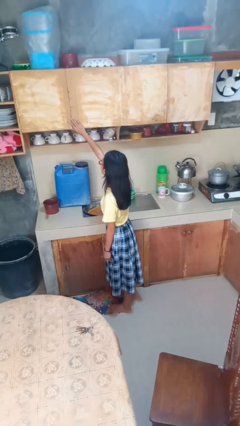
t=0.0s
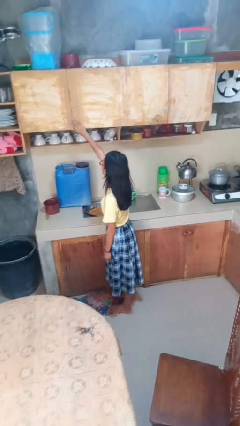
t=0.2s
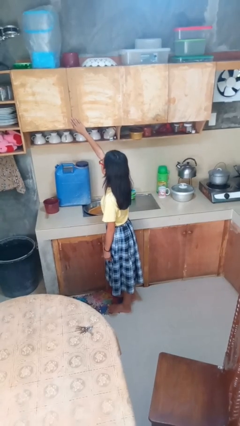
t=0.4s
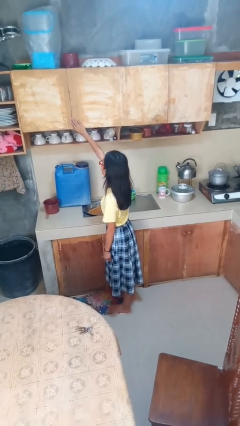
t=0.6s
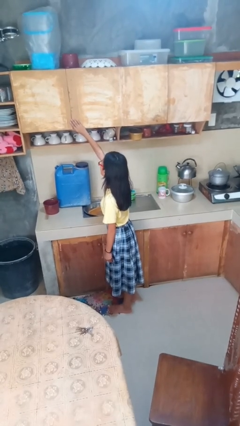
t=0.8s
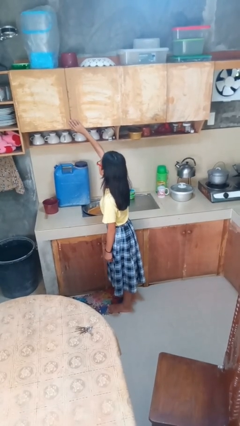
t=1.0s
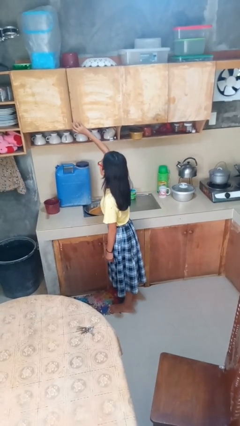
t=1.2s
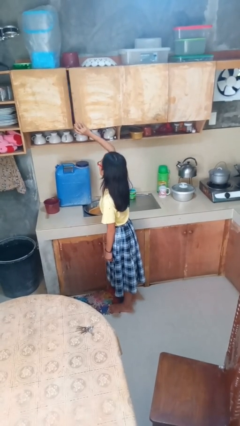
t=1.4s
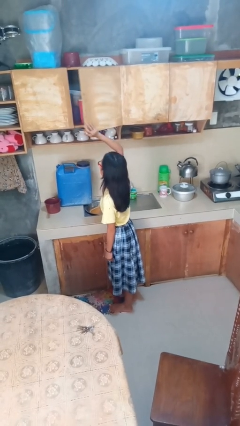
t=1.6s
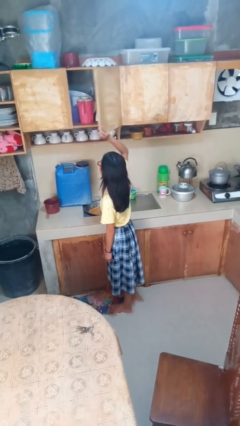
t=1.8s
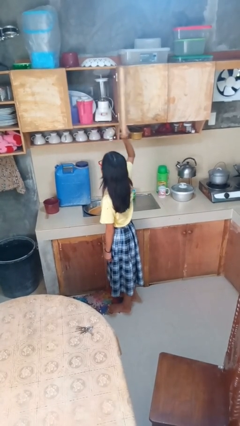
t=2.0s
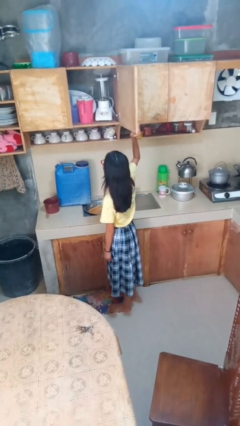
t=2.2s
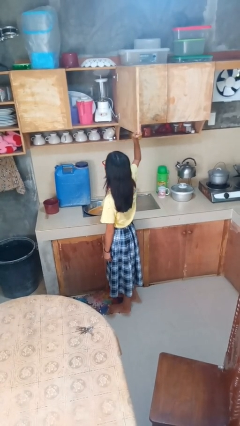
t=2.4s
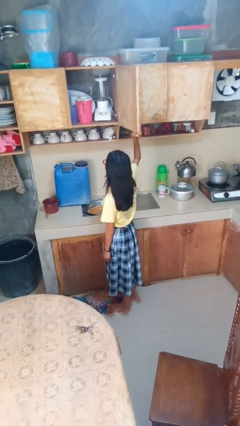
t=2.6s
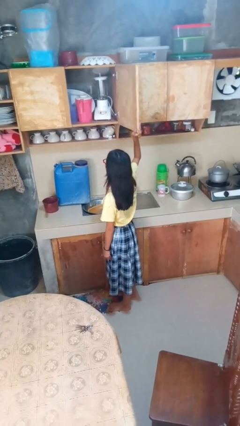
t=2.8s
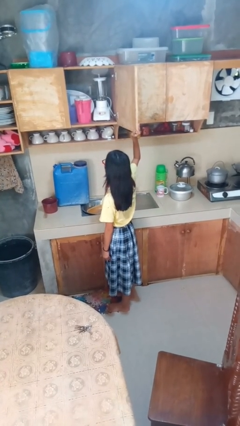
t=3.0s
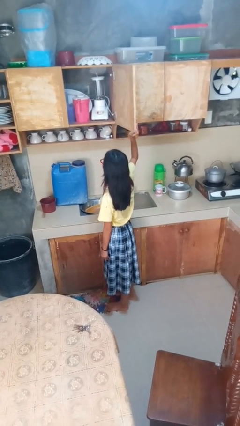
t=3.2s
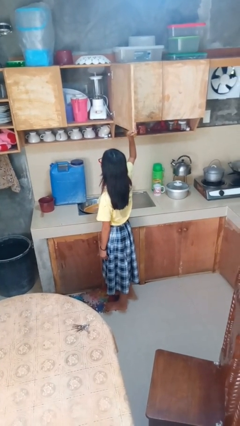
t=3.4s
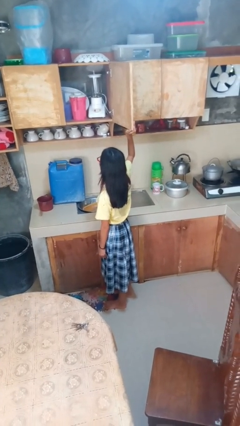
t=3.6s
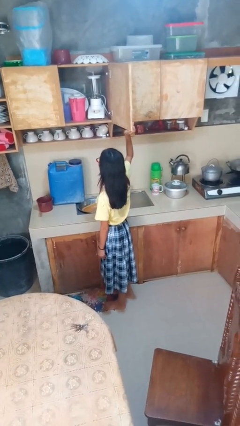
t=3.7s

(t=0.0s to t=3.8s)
person opens cabinet

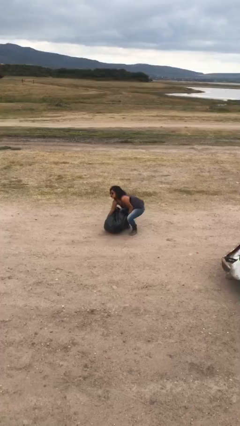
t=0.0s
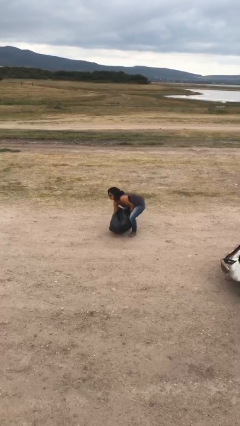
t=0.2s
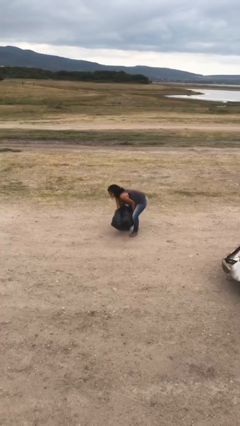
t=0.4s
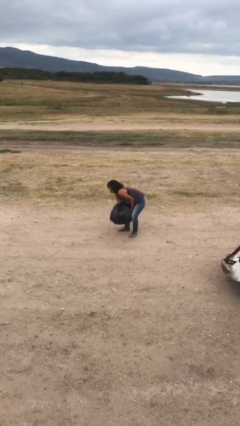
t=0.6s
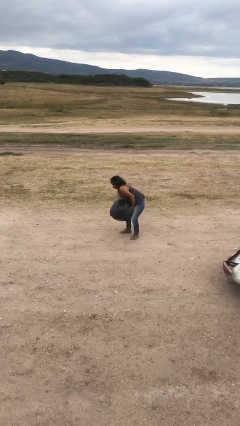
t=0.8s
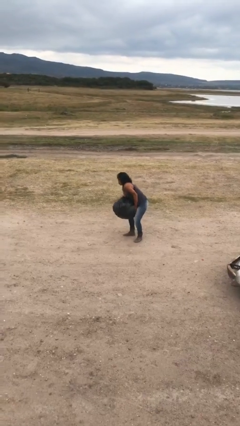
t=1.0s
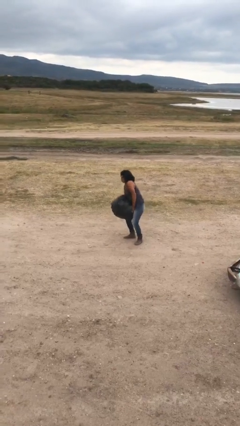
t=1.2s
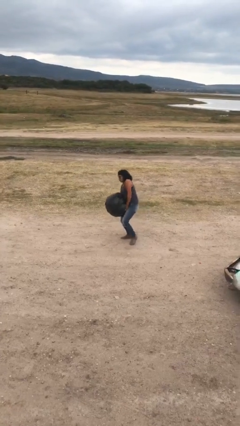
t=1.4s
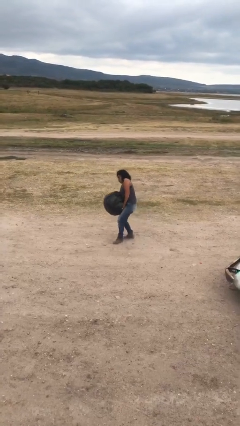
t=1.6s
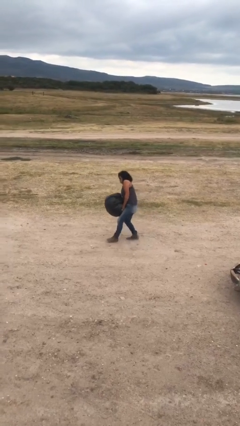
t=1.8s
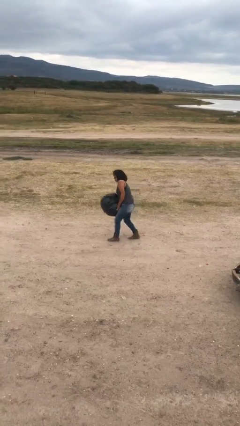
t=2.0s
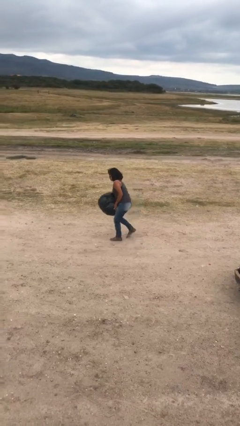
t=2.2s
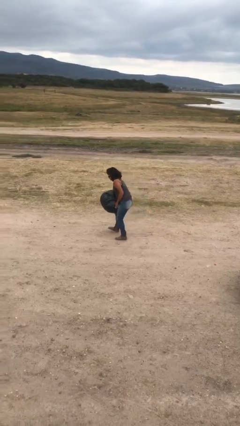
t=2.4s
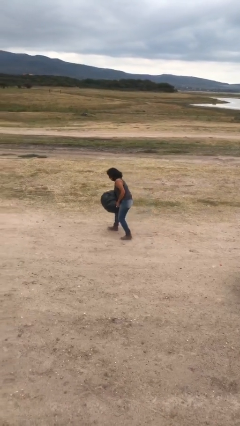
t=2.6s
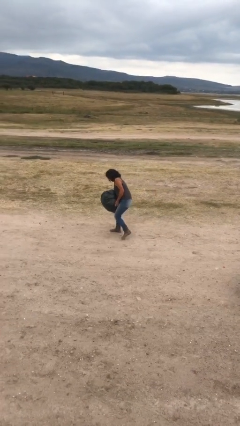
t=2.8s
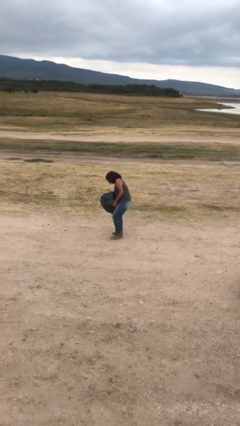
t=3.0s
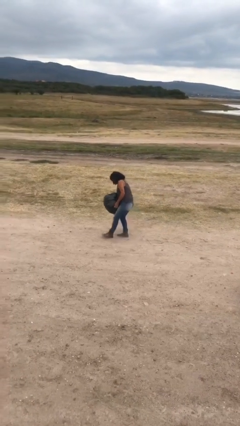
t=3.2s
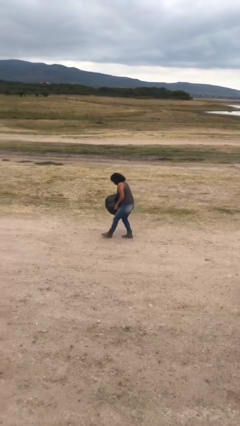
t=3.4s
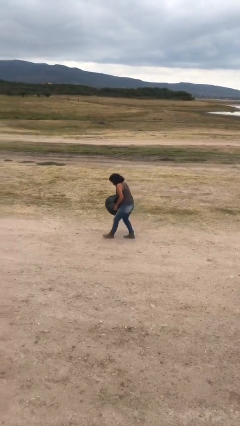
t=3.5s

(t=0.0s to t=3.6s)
person carries heavy object

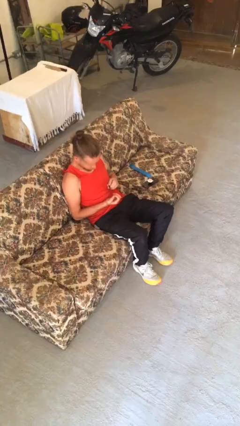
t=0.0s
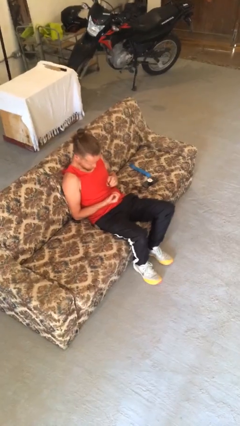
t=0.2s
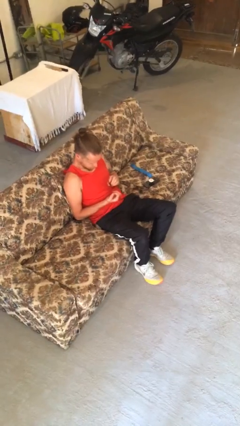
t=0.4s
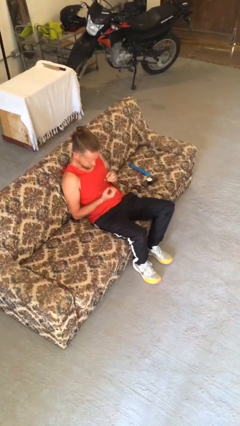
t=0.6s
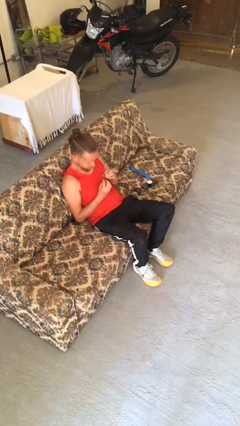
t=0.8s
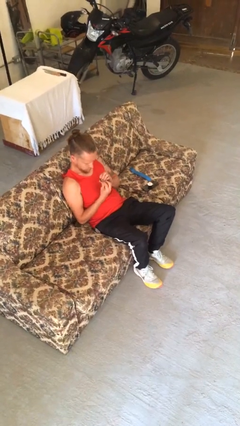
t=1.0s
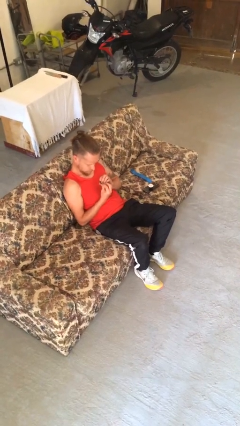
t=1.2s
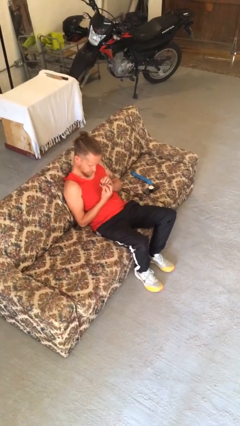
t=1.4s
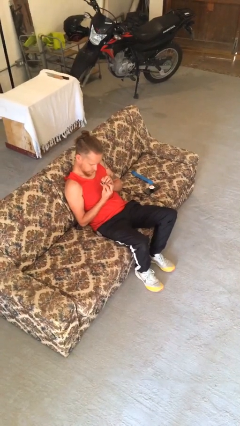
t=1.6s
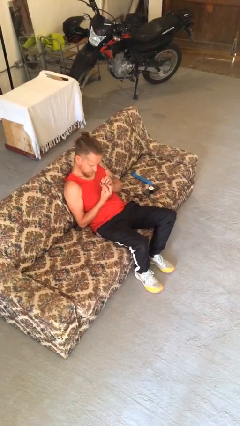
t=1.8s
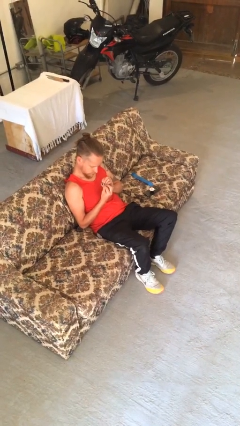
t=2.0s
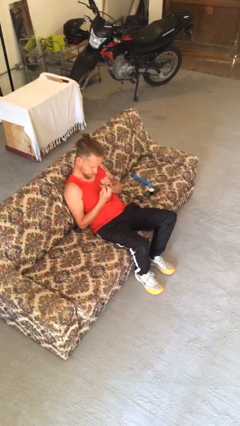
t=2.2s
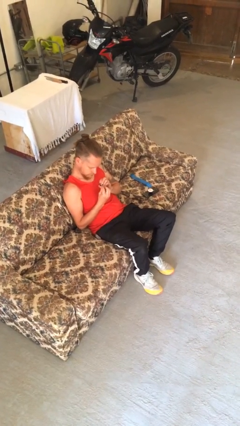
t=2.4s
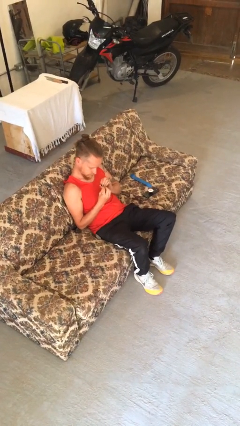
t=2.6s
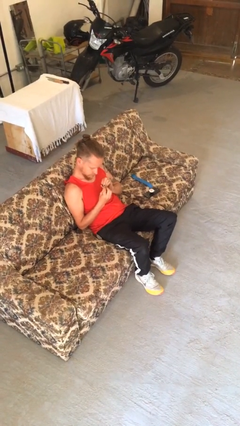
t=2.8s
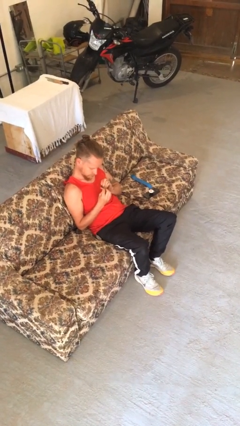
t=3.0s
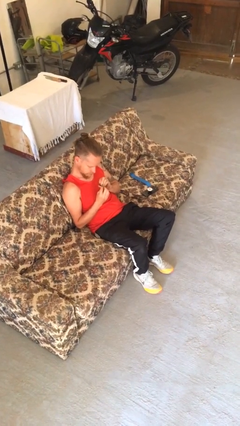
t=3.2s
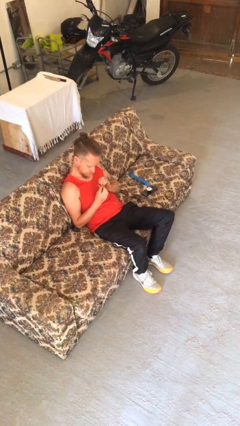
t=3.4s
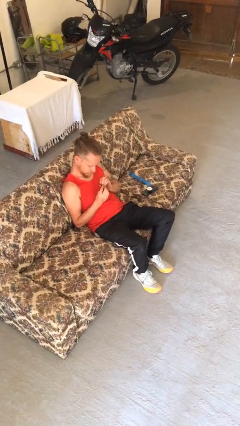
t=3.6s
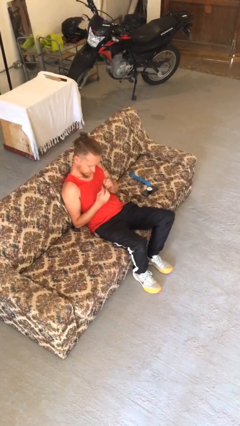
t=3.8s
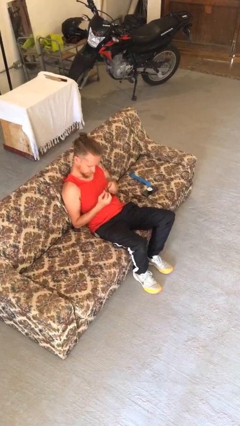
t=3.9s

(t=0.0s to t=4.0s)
person clips fingernails

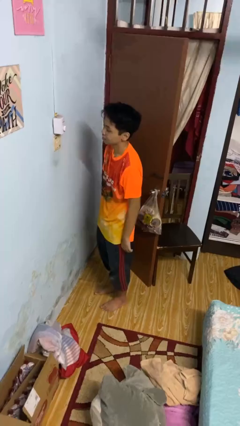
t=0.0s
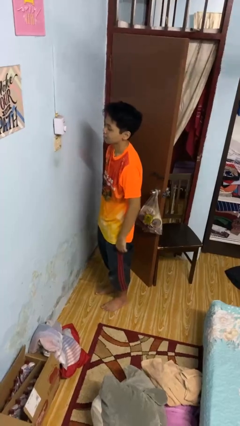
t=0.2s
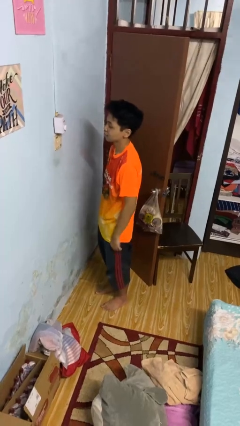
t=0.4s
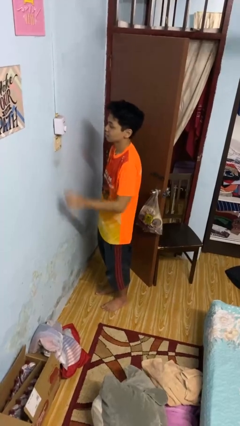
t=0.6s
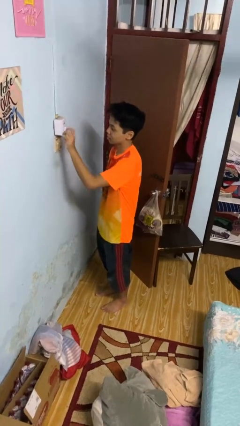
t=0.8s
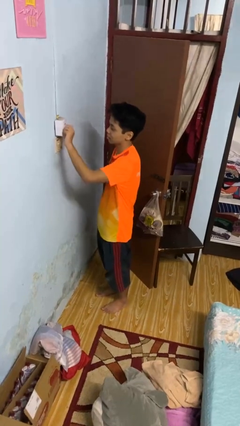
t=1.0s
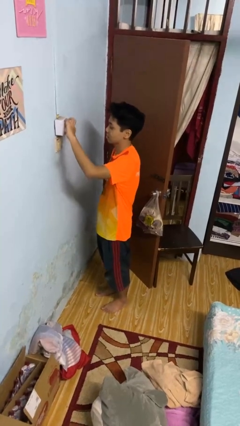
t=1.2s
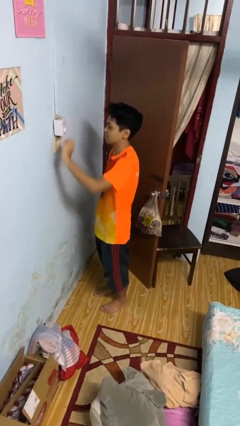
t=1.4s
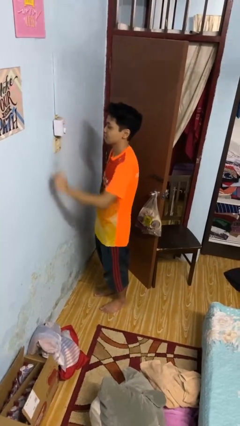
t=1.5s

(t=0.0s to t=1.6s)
person adjusts thermostat

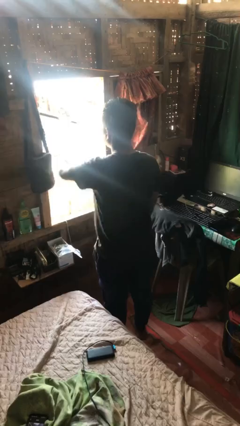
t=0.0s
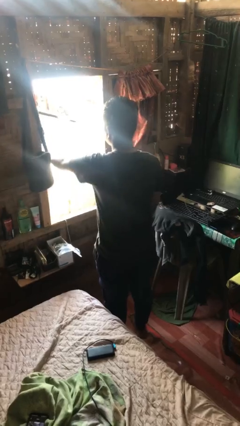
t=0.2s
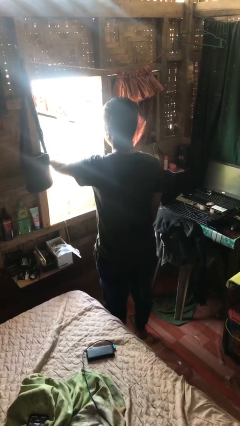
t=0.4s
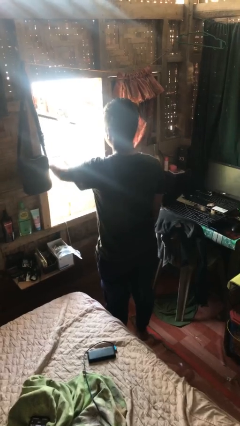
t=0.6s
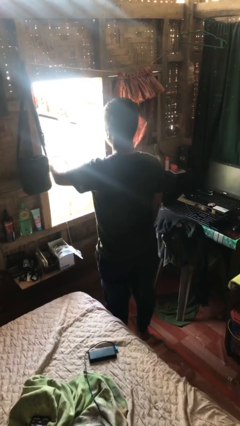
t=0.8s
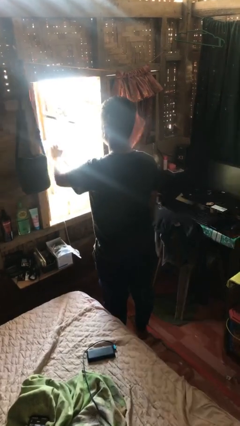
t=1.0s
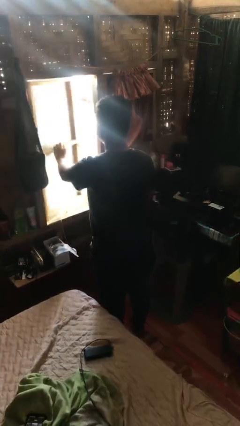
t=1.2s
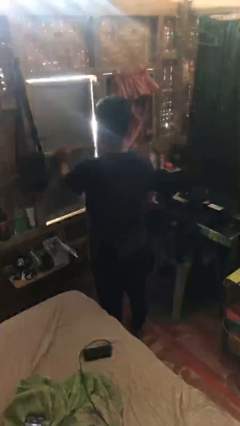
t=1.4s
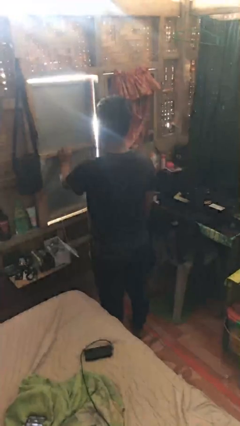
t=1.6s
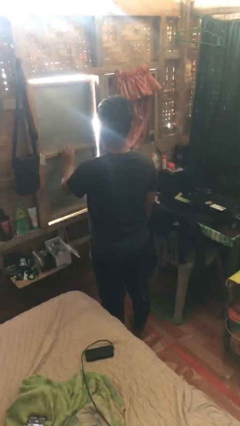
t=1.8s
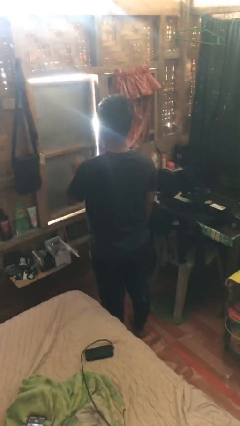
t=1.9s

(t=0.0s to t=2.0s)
person closes home window

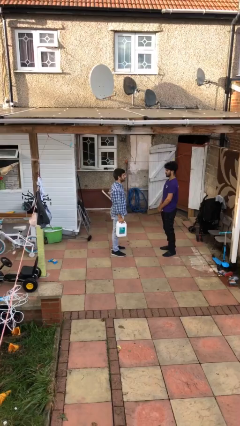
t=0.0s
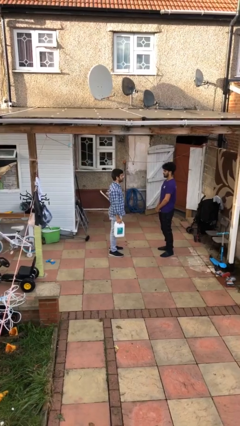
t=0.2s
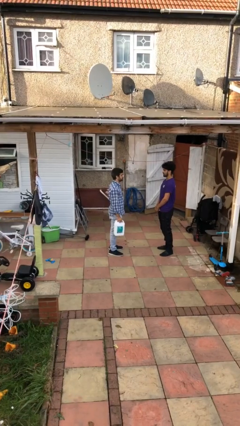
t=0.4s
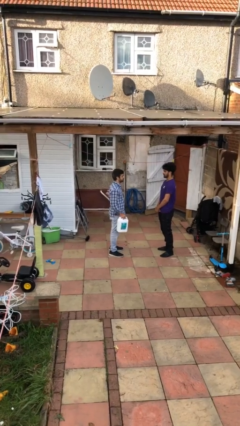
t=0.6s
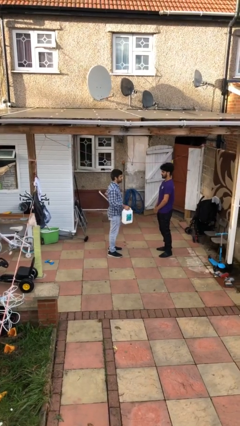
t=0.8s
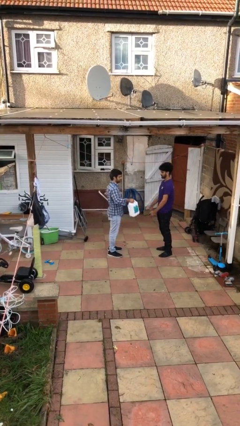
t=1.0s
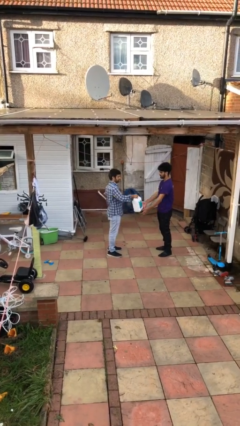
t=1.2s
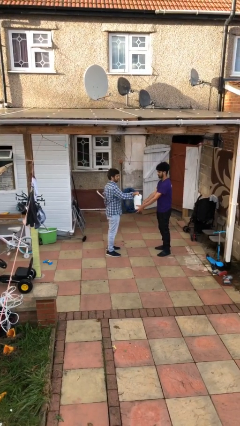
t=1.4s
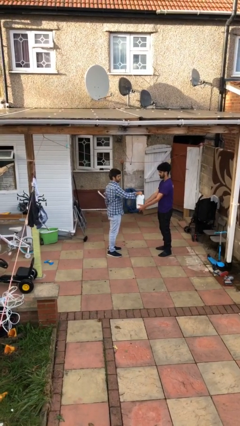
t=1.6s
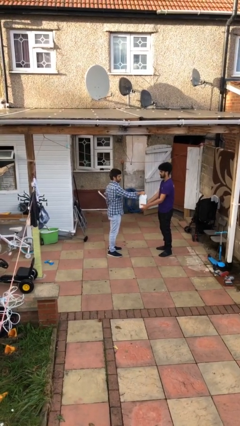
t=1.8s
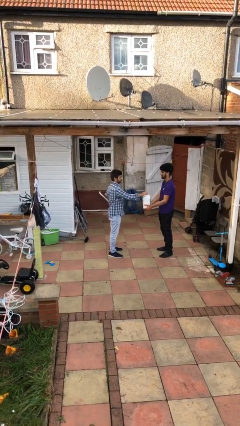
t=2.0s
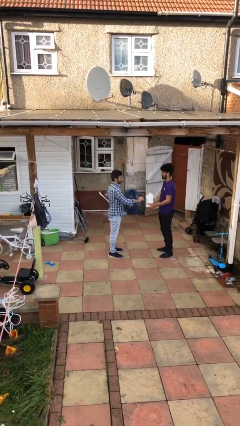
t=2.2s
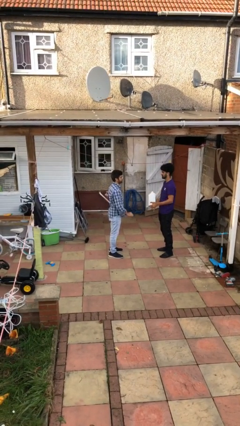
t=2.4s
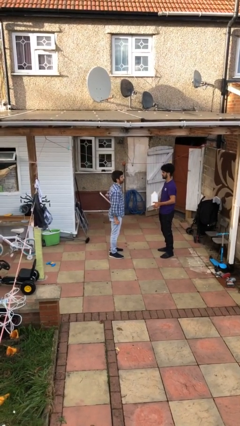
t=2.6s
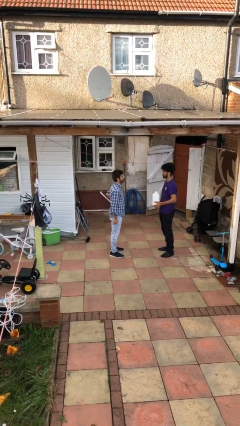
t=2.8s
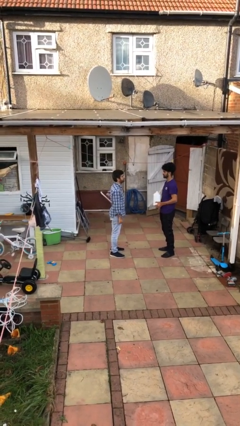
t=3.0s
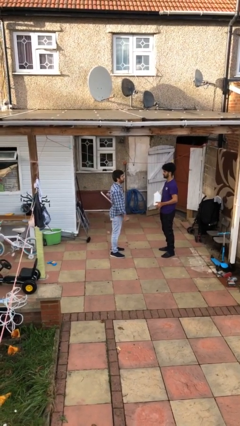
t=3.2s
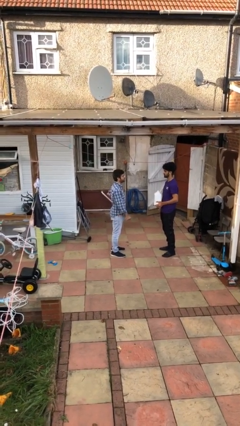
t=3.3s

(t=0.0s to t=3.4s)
person transfers object to person
